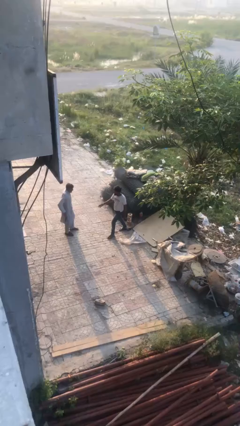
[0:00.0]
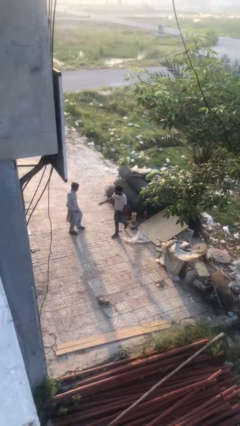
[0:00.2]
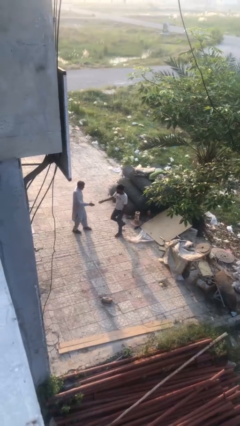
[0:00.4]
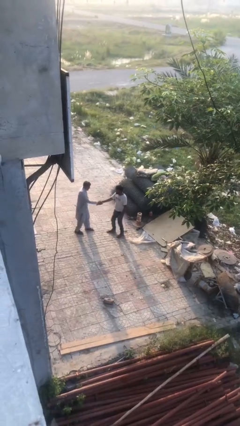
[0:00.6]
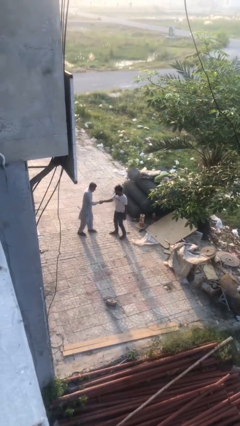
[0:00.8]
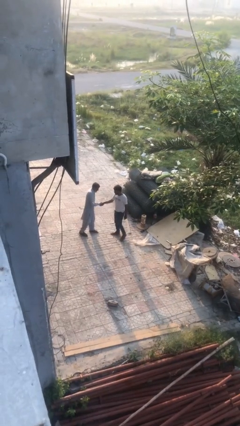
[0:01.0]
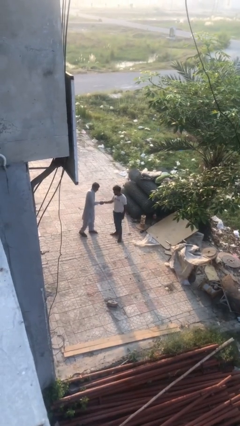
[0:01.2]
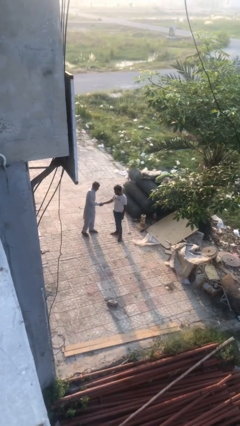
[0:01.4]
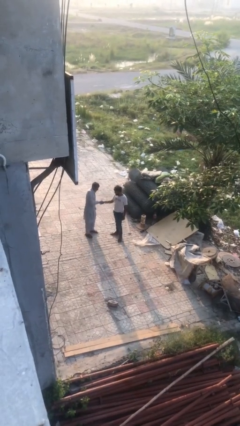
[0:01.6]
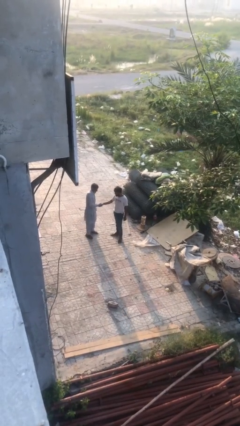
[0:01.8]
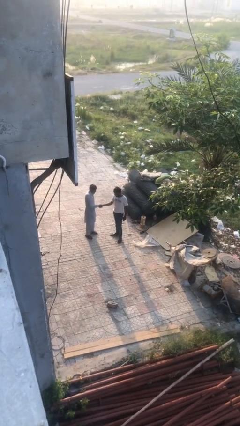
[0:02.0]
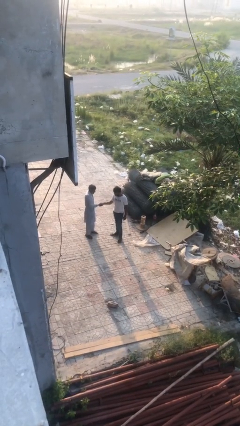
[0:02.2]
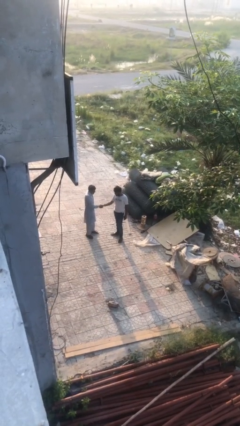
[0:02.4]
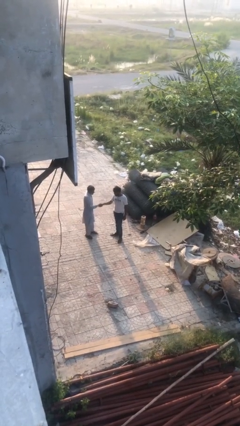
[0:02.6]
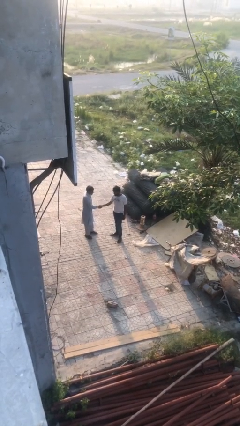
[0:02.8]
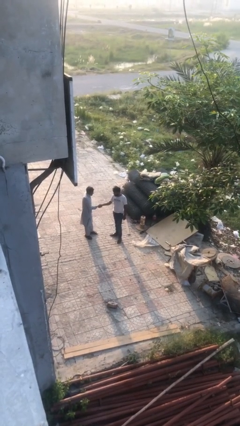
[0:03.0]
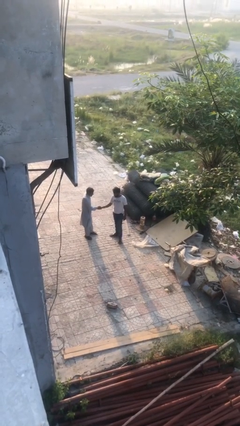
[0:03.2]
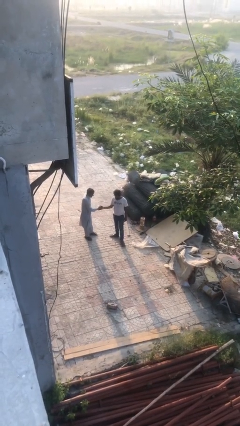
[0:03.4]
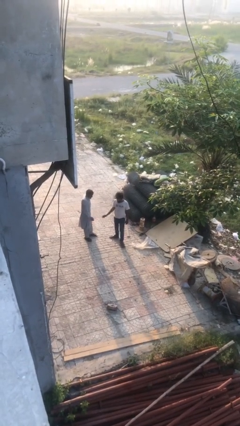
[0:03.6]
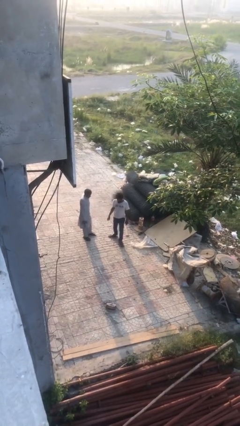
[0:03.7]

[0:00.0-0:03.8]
person shakes hand

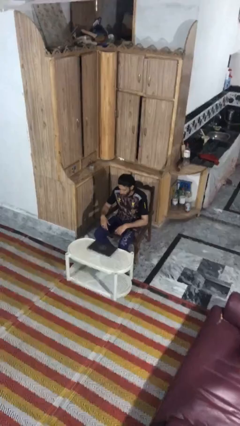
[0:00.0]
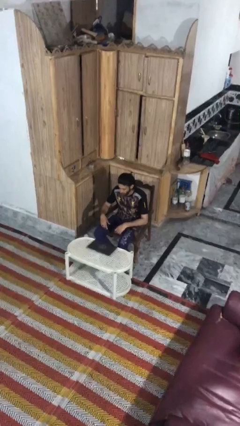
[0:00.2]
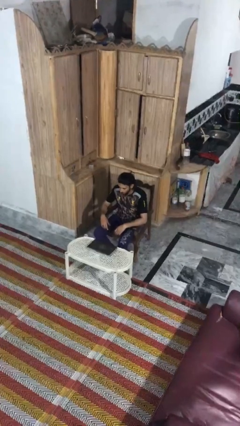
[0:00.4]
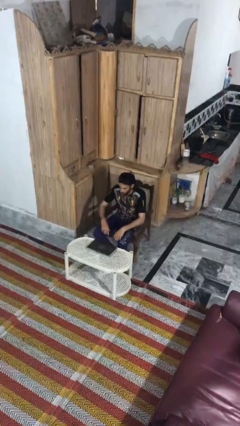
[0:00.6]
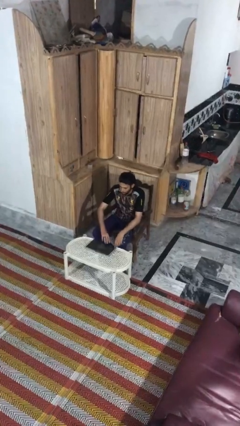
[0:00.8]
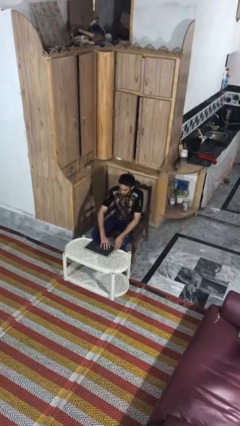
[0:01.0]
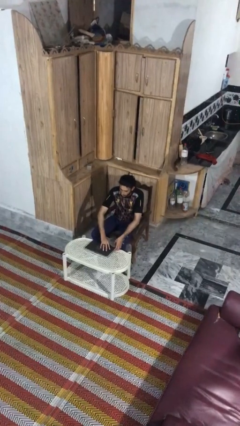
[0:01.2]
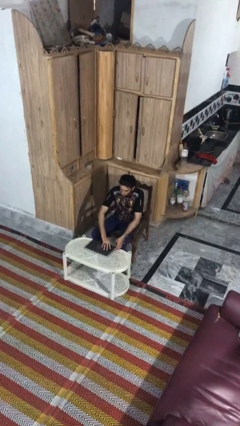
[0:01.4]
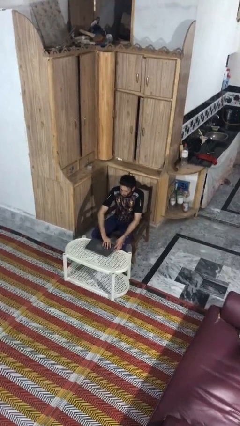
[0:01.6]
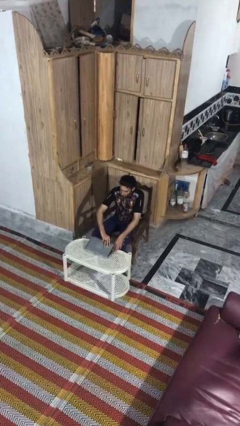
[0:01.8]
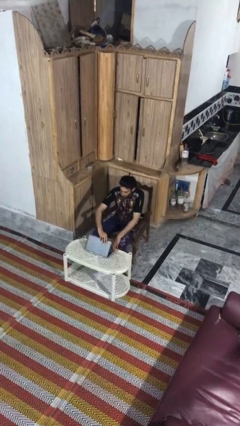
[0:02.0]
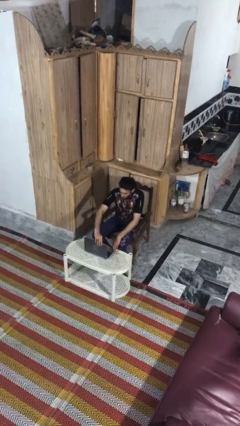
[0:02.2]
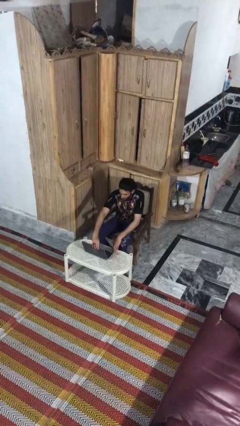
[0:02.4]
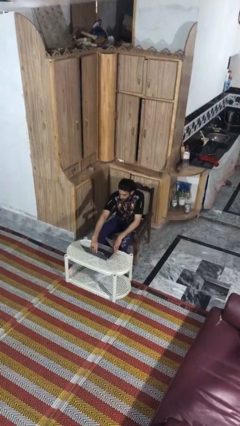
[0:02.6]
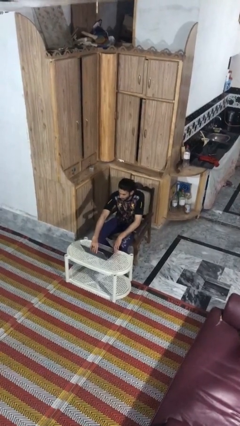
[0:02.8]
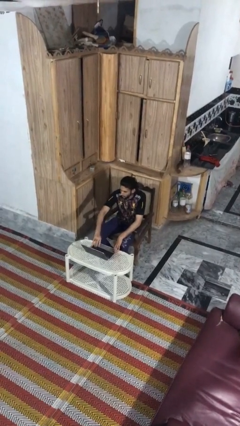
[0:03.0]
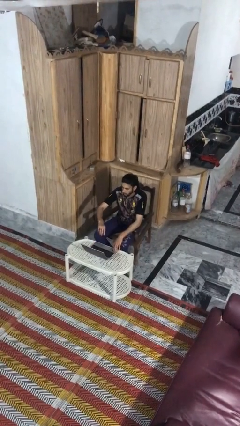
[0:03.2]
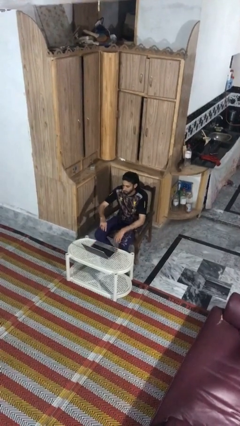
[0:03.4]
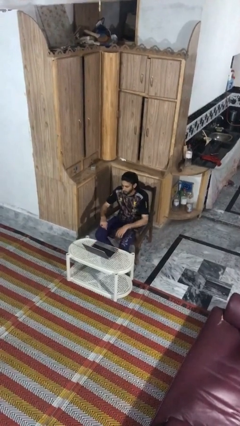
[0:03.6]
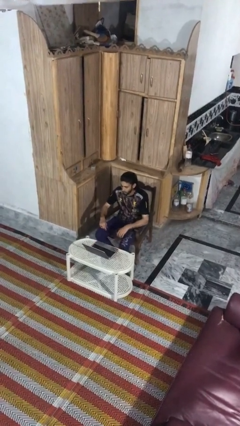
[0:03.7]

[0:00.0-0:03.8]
person opens laptop

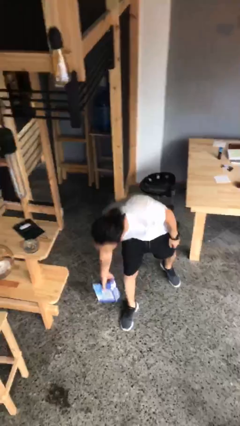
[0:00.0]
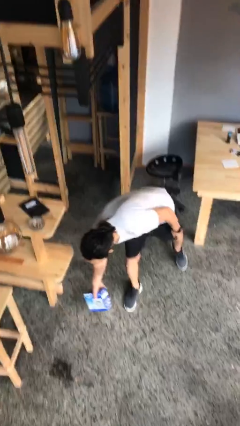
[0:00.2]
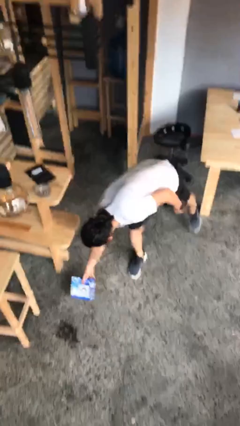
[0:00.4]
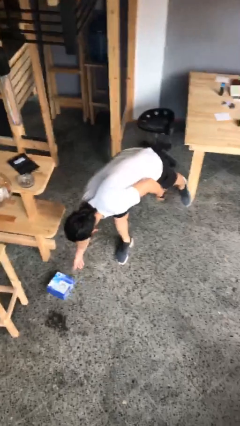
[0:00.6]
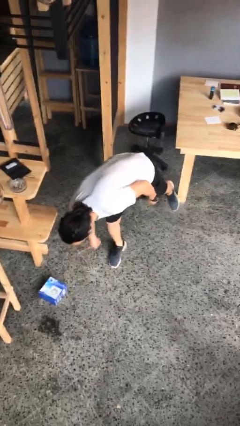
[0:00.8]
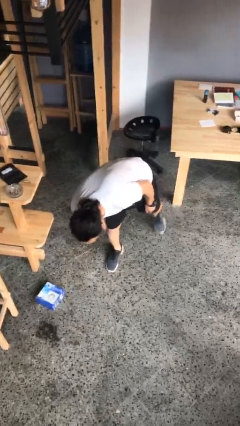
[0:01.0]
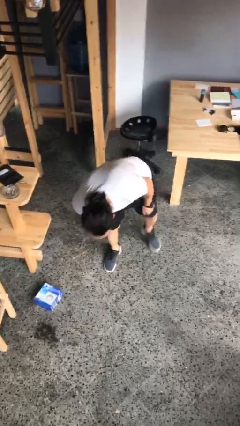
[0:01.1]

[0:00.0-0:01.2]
person puts down object on floor

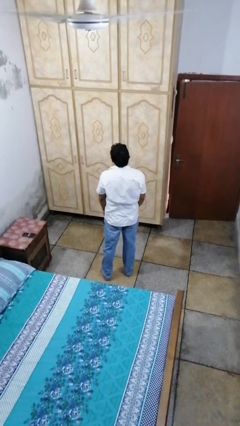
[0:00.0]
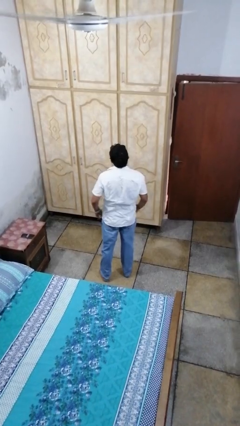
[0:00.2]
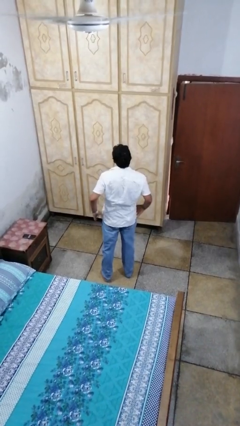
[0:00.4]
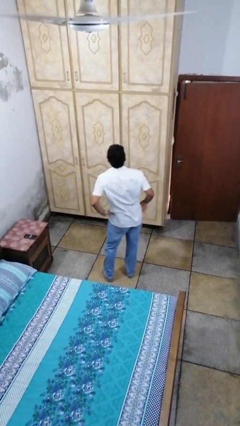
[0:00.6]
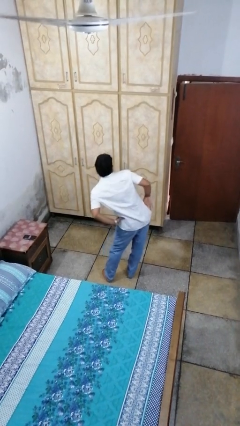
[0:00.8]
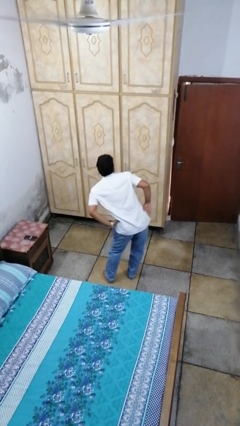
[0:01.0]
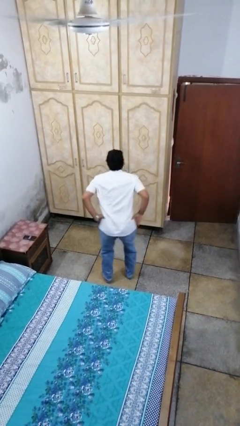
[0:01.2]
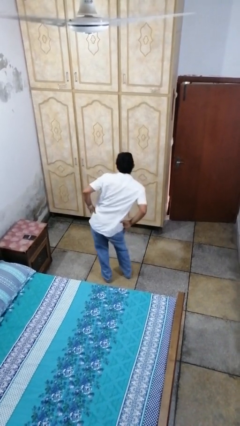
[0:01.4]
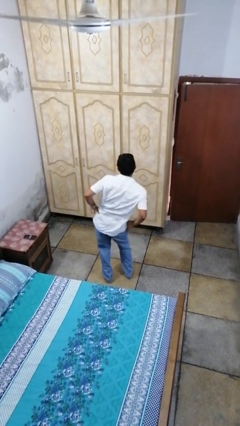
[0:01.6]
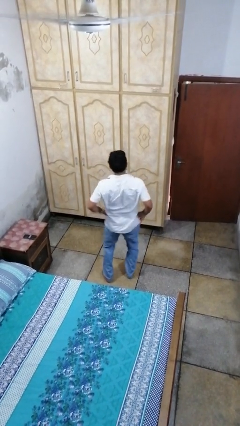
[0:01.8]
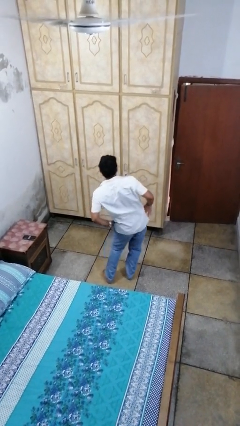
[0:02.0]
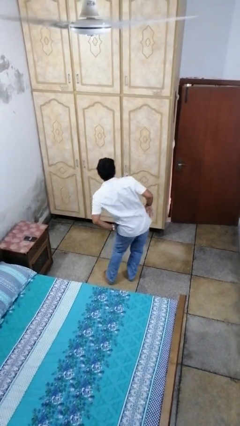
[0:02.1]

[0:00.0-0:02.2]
person wiggles hips

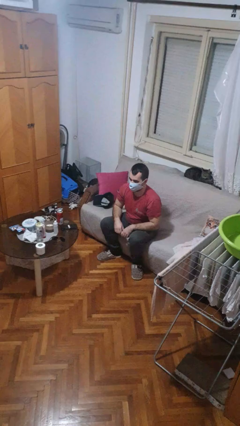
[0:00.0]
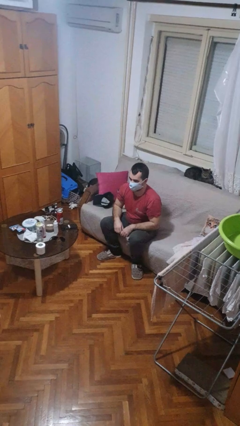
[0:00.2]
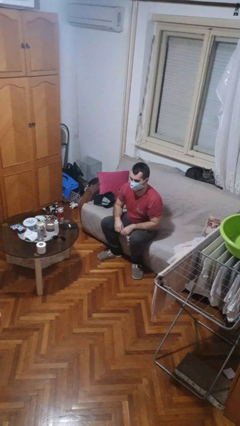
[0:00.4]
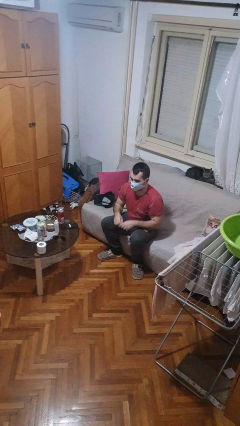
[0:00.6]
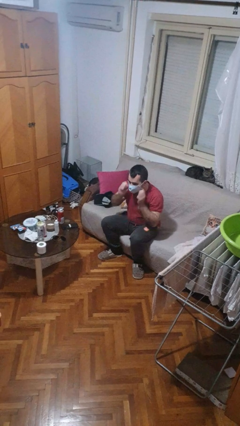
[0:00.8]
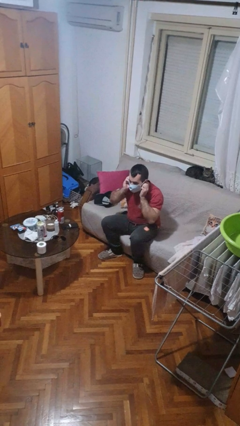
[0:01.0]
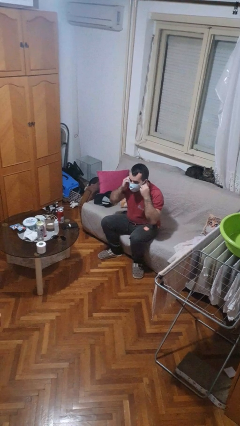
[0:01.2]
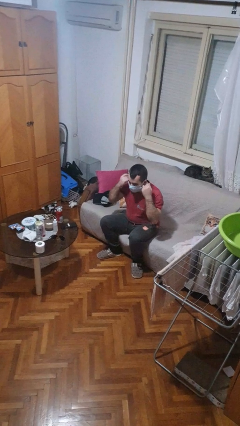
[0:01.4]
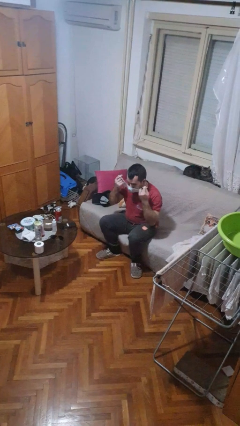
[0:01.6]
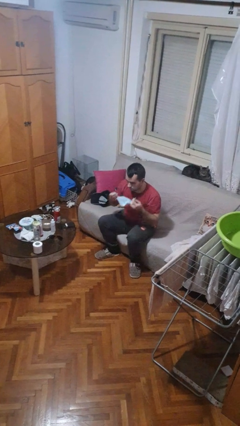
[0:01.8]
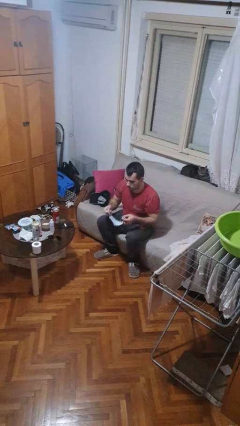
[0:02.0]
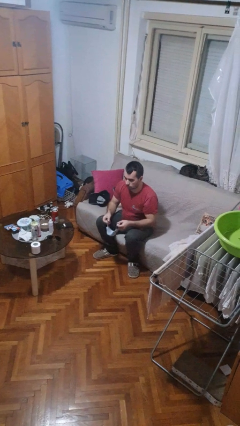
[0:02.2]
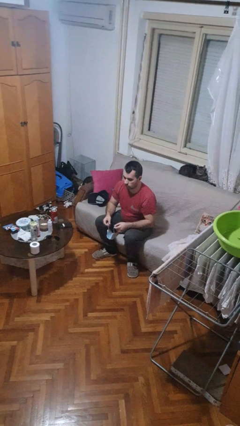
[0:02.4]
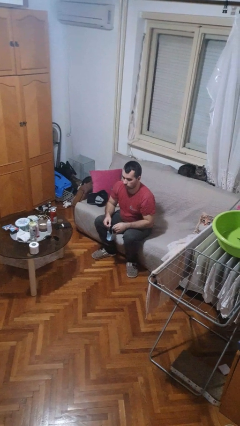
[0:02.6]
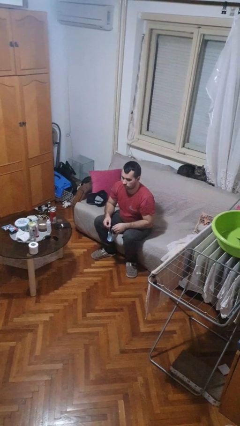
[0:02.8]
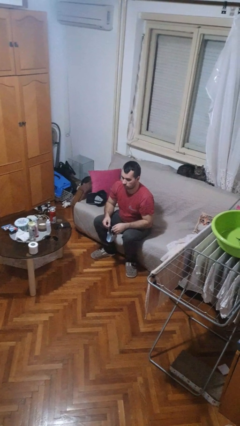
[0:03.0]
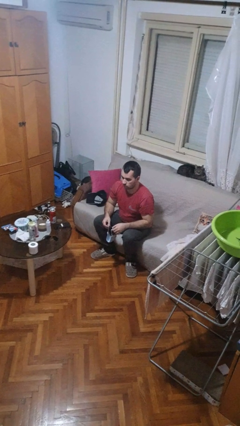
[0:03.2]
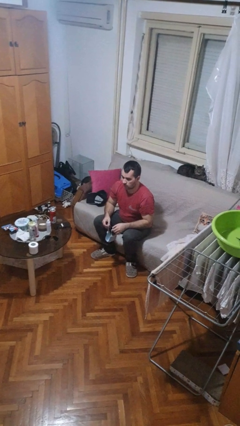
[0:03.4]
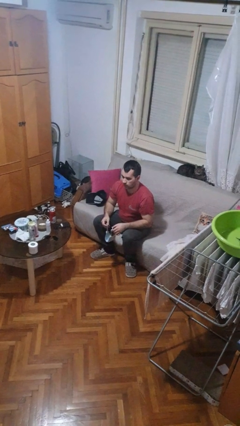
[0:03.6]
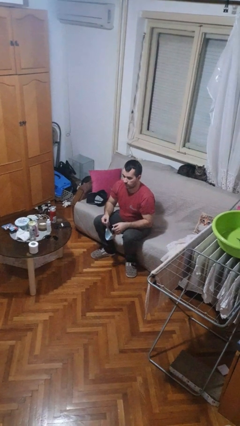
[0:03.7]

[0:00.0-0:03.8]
person takes off facemask

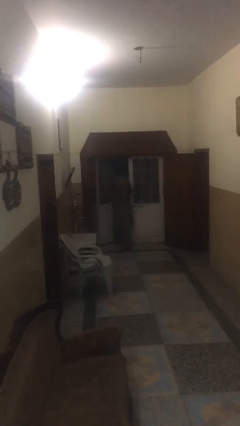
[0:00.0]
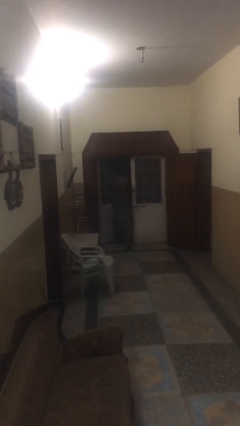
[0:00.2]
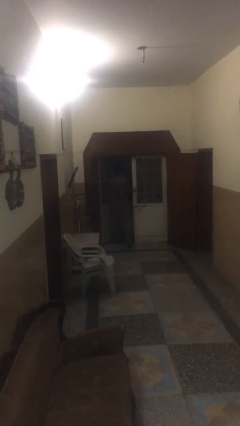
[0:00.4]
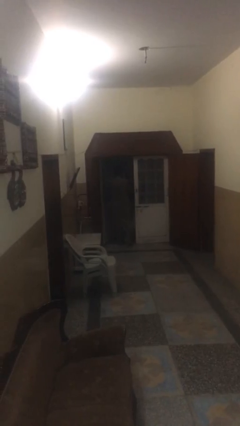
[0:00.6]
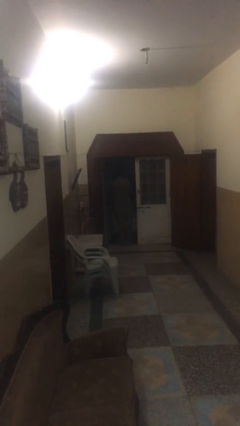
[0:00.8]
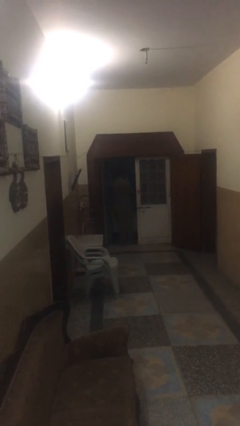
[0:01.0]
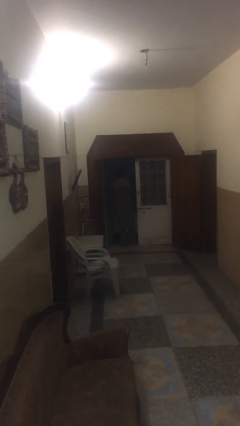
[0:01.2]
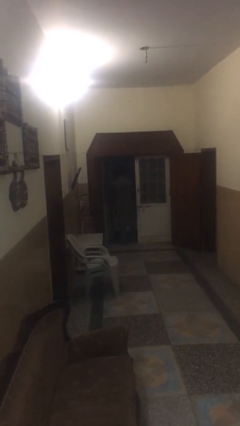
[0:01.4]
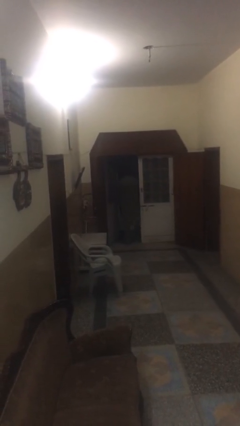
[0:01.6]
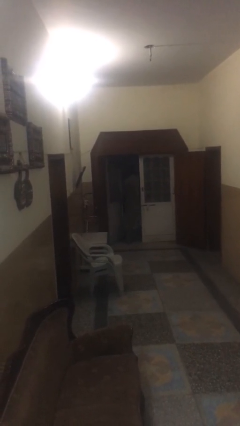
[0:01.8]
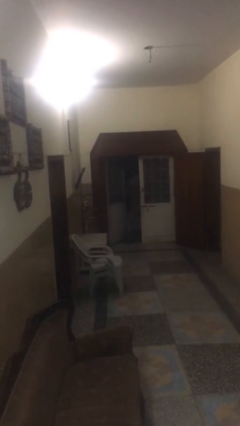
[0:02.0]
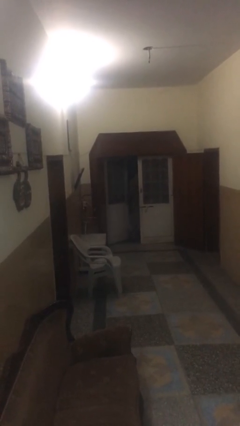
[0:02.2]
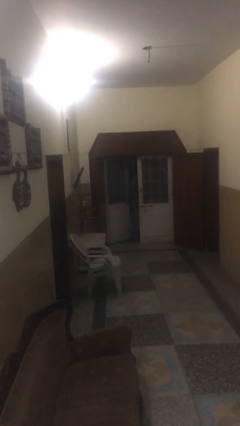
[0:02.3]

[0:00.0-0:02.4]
person exits scene through structure

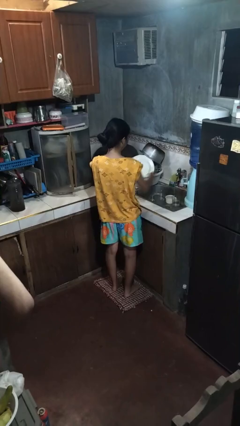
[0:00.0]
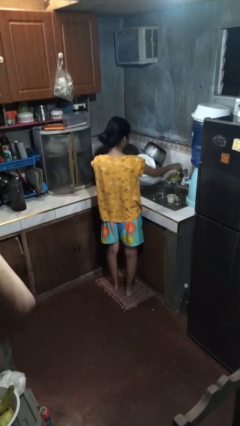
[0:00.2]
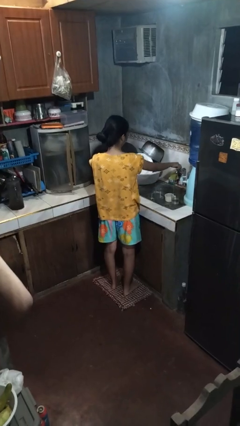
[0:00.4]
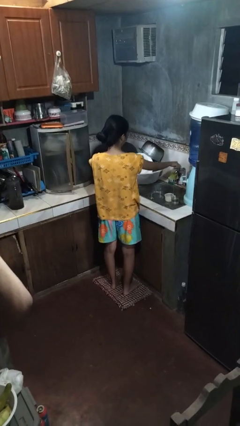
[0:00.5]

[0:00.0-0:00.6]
person turns off faucet
